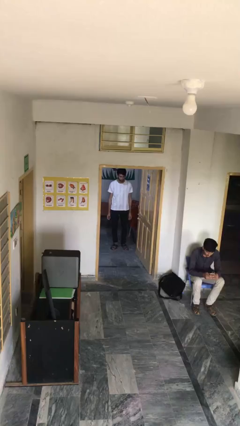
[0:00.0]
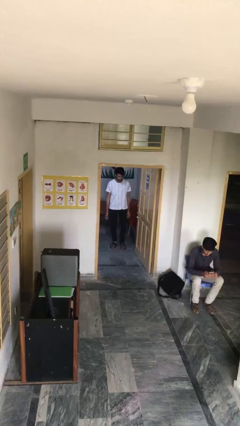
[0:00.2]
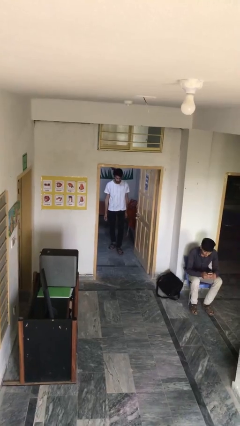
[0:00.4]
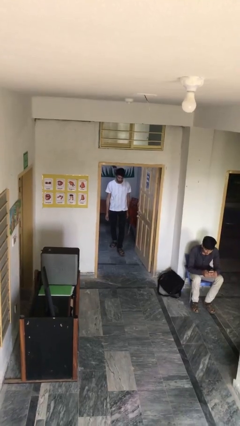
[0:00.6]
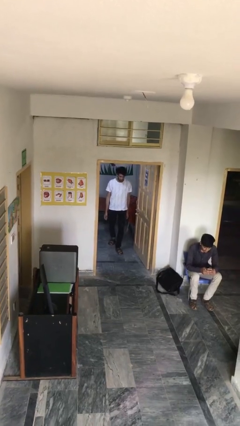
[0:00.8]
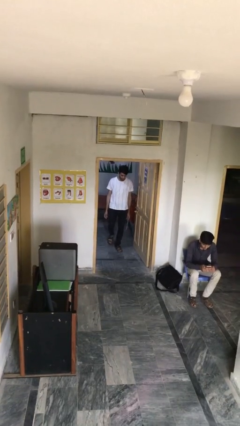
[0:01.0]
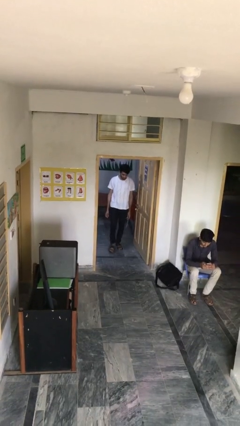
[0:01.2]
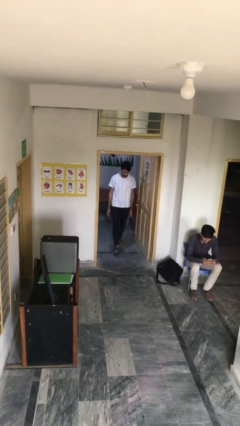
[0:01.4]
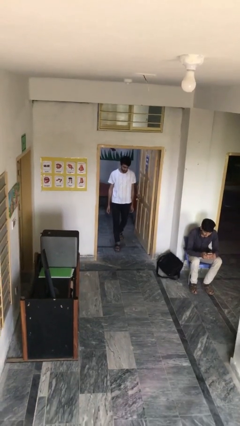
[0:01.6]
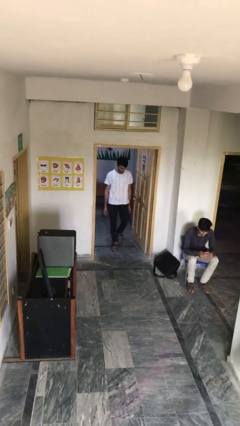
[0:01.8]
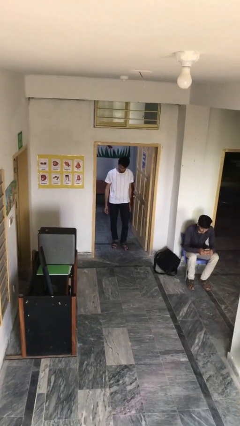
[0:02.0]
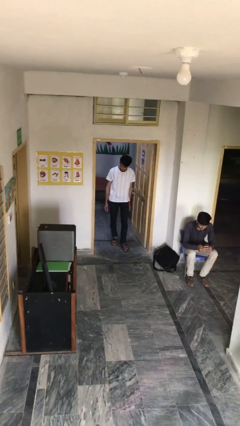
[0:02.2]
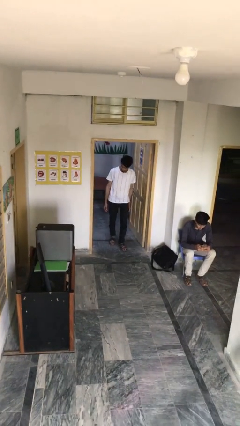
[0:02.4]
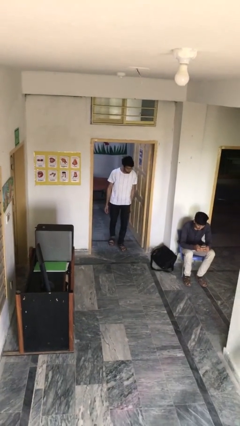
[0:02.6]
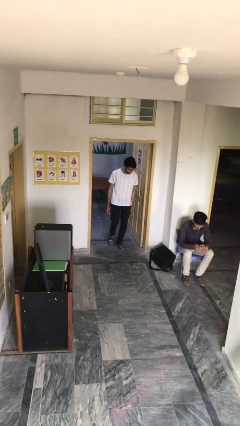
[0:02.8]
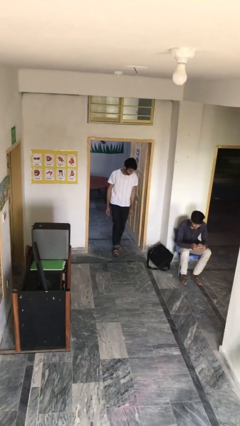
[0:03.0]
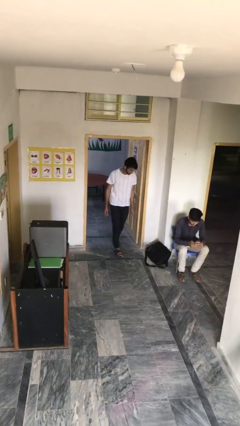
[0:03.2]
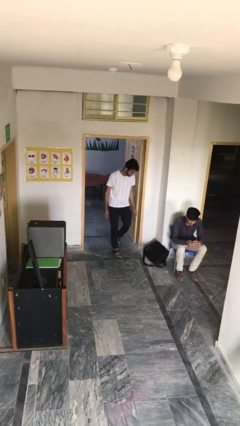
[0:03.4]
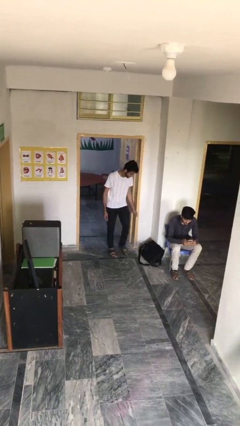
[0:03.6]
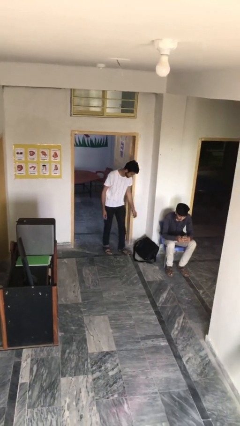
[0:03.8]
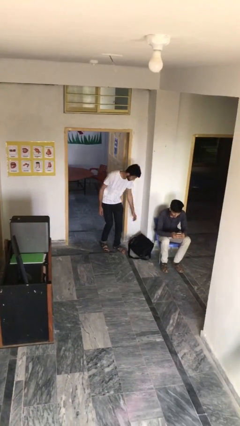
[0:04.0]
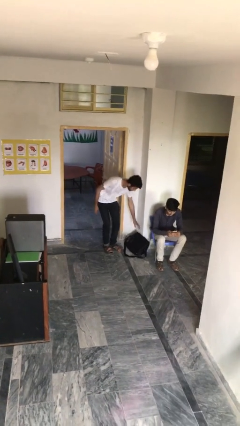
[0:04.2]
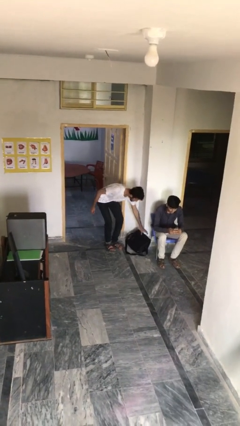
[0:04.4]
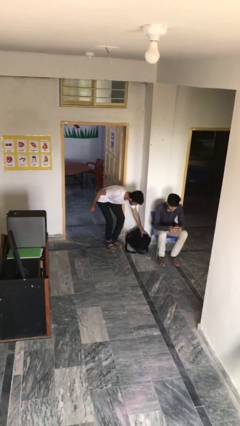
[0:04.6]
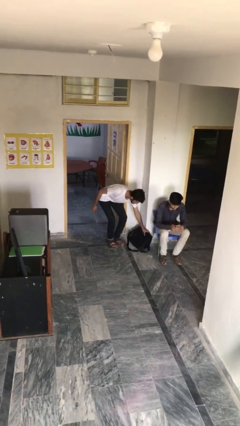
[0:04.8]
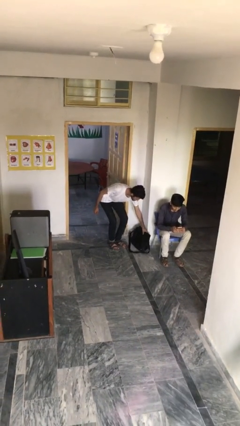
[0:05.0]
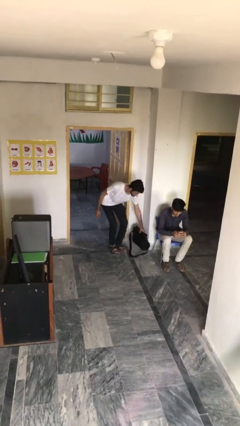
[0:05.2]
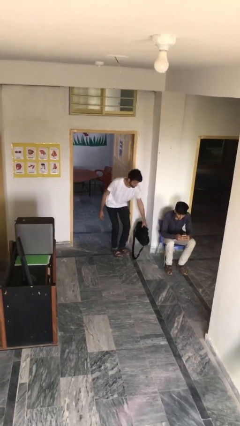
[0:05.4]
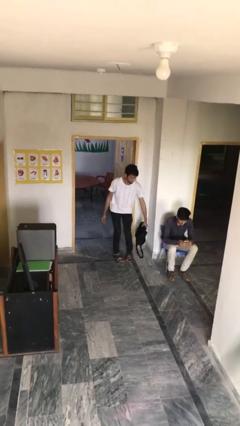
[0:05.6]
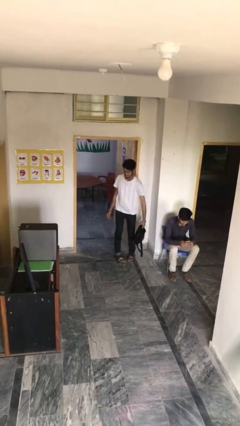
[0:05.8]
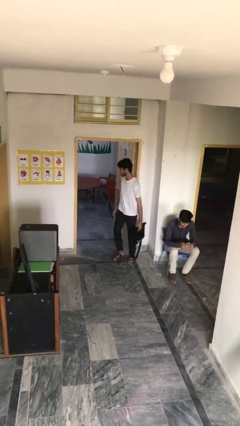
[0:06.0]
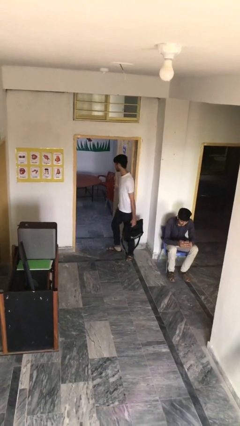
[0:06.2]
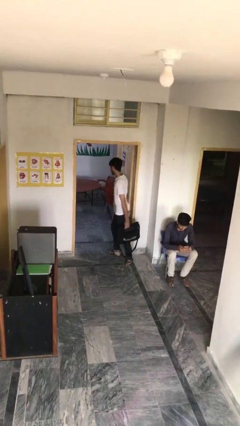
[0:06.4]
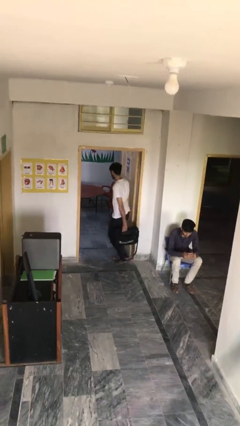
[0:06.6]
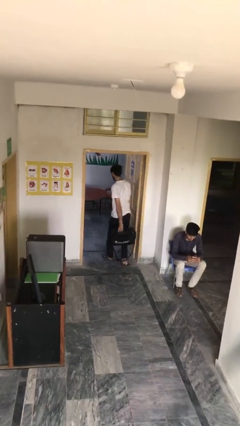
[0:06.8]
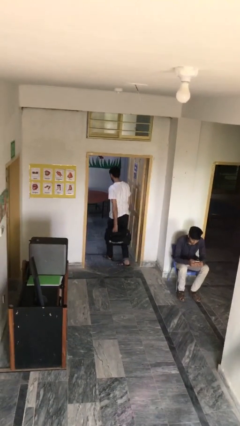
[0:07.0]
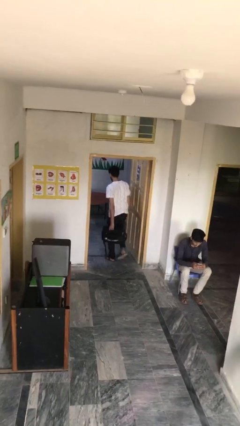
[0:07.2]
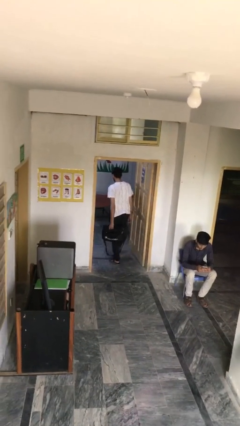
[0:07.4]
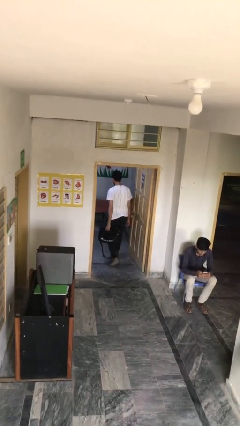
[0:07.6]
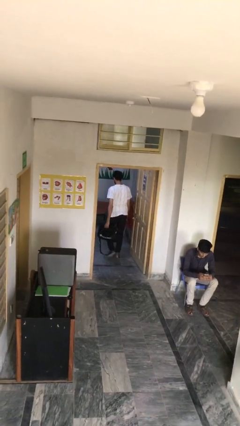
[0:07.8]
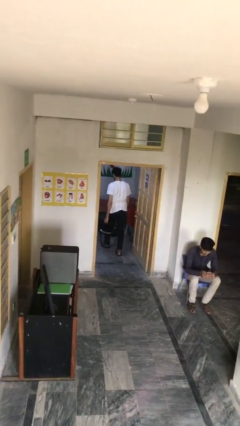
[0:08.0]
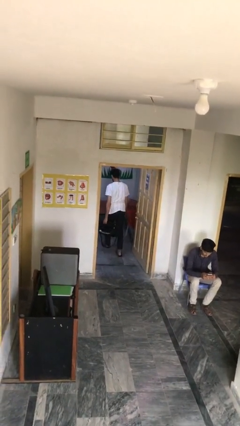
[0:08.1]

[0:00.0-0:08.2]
person steals object from person

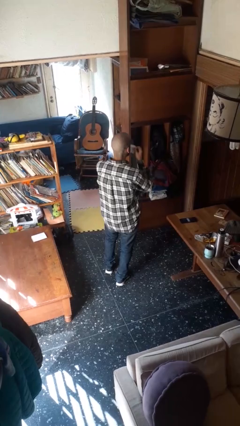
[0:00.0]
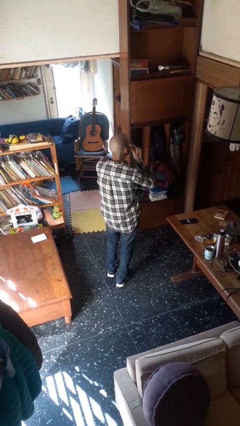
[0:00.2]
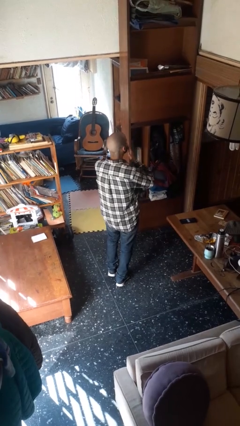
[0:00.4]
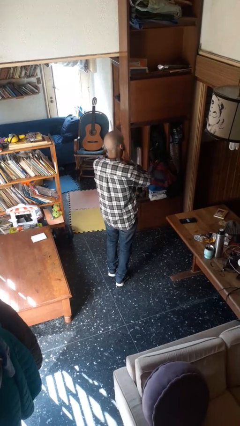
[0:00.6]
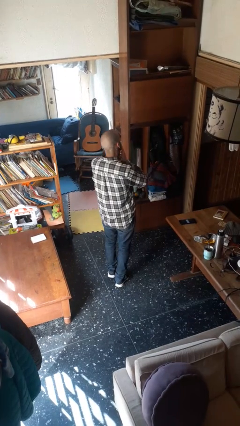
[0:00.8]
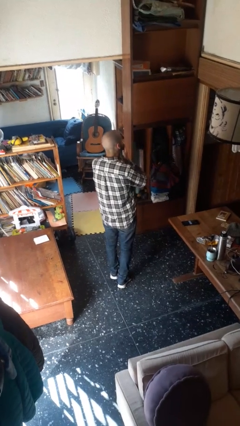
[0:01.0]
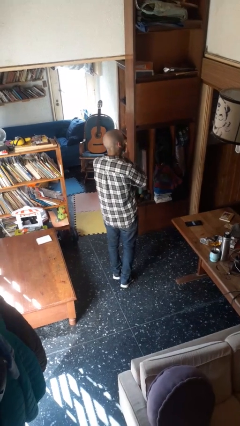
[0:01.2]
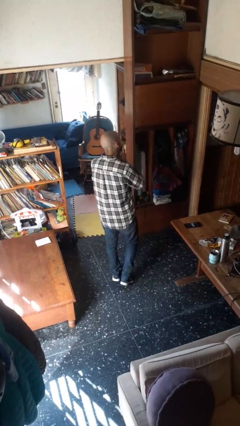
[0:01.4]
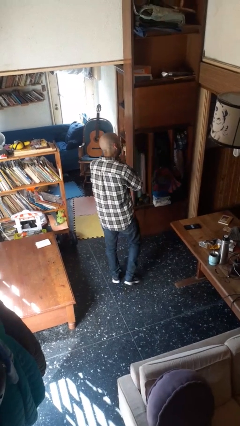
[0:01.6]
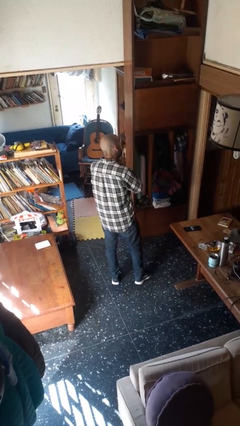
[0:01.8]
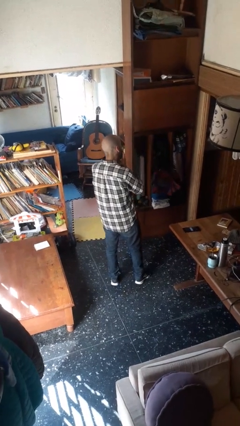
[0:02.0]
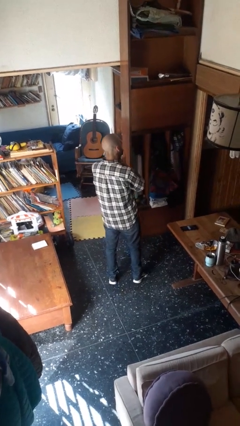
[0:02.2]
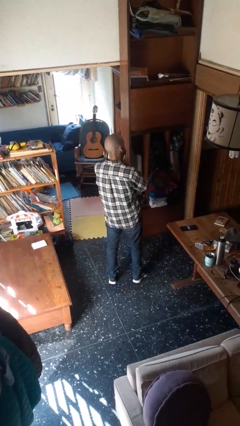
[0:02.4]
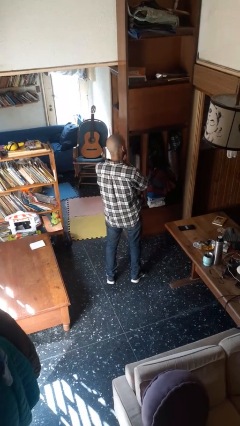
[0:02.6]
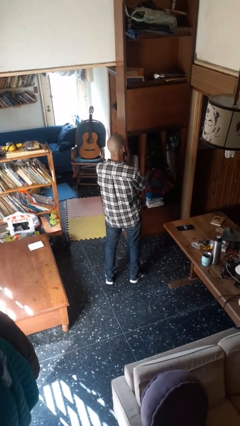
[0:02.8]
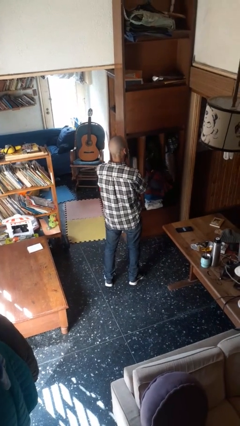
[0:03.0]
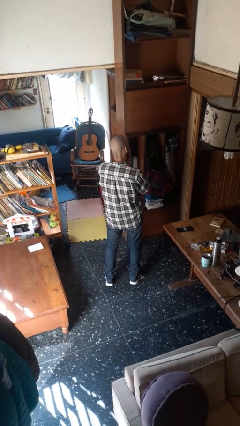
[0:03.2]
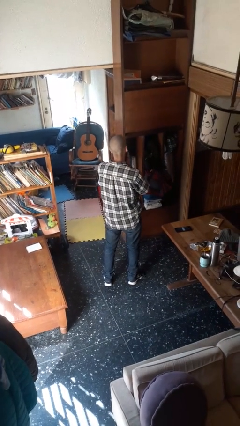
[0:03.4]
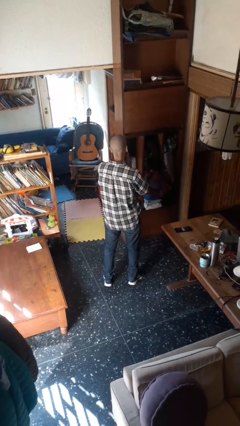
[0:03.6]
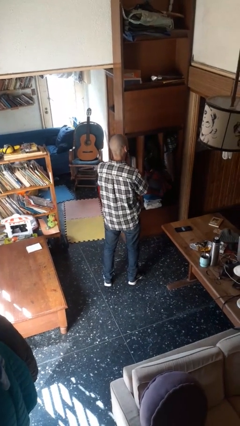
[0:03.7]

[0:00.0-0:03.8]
person wipes mouth with napkin

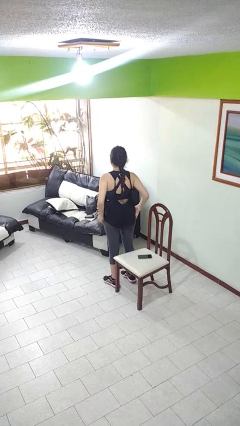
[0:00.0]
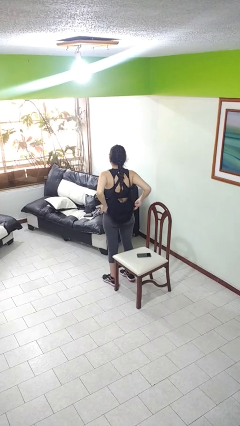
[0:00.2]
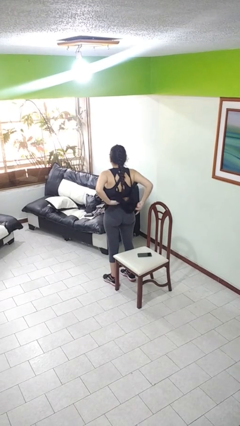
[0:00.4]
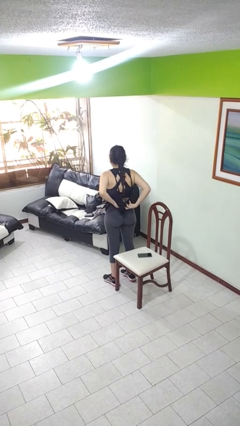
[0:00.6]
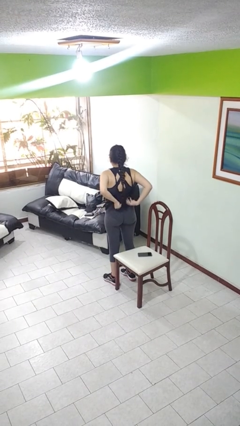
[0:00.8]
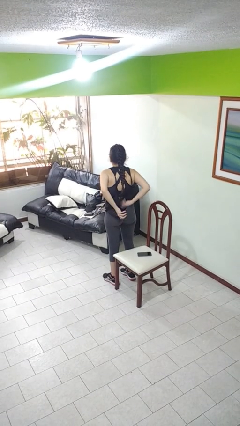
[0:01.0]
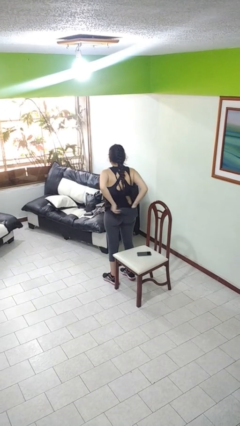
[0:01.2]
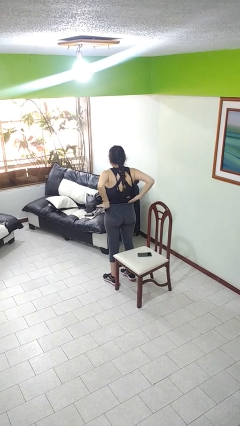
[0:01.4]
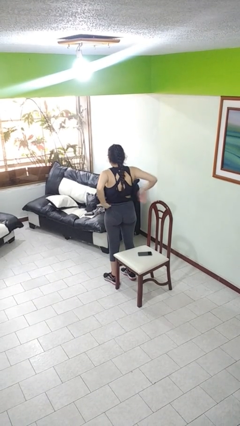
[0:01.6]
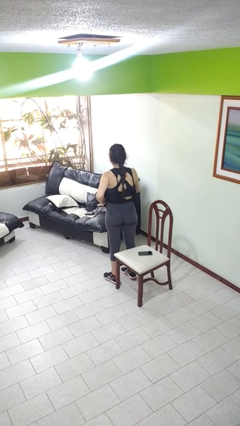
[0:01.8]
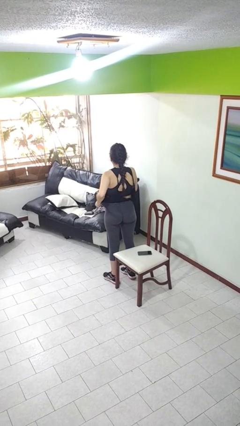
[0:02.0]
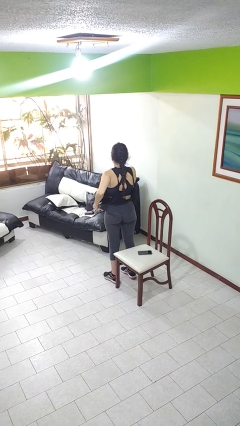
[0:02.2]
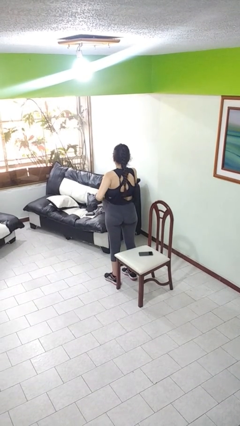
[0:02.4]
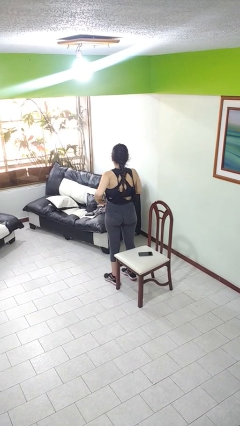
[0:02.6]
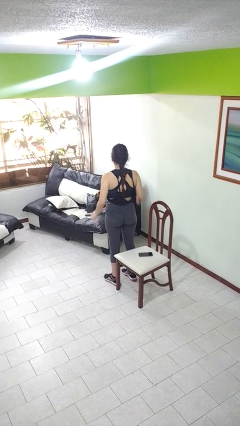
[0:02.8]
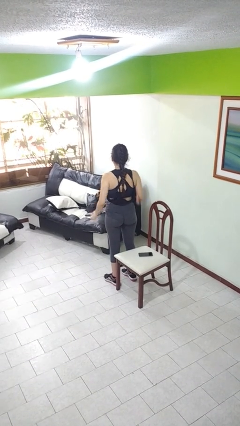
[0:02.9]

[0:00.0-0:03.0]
person tucks in shirt

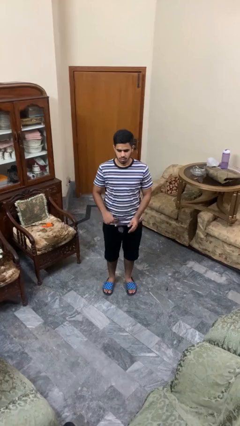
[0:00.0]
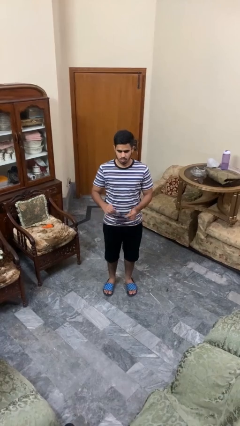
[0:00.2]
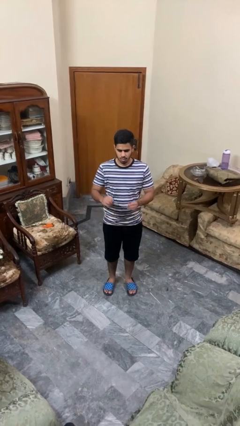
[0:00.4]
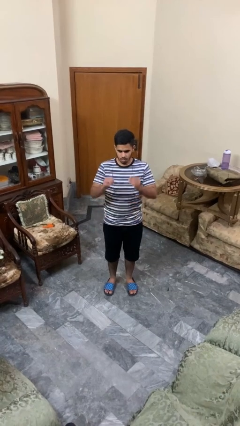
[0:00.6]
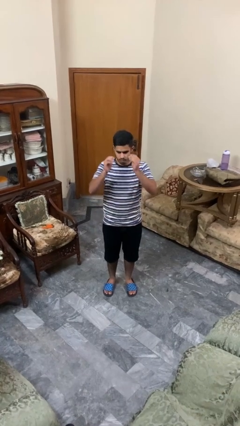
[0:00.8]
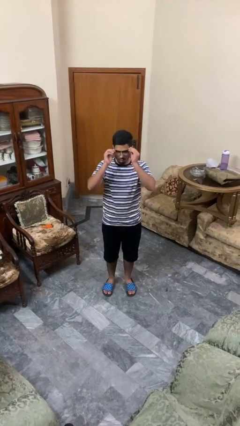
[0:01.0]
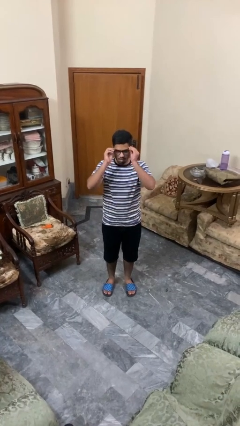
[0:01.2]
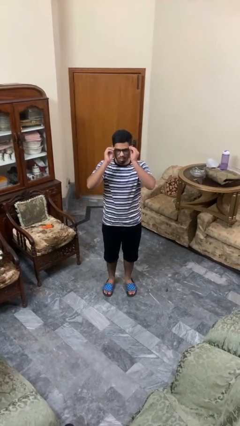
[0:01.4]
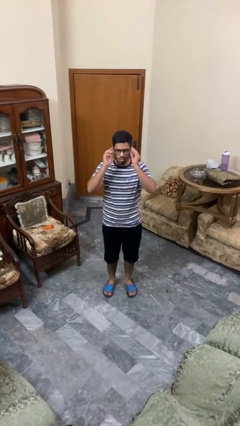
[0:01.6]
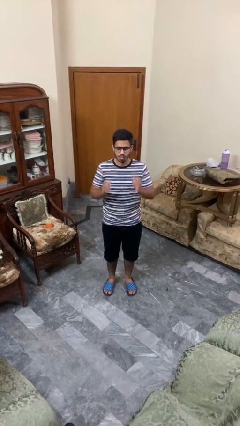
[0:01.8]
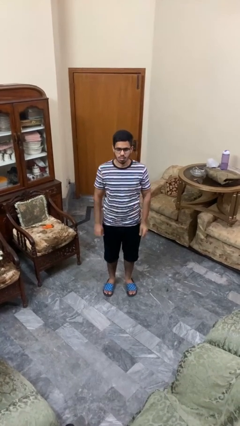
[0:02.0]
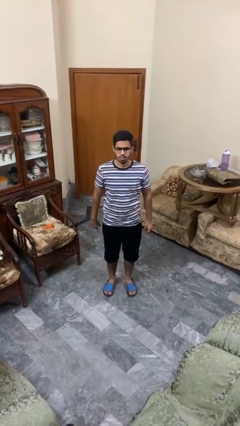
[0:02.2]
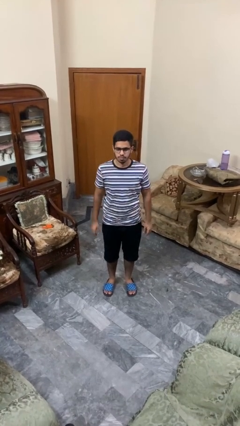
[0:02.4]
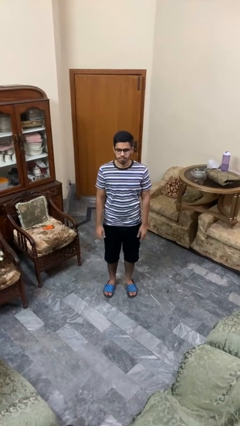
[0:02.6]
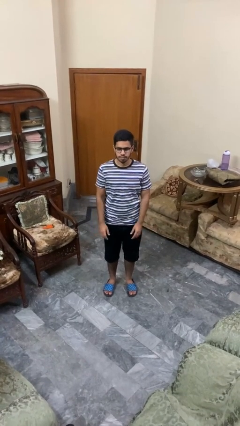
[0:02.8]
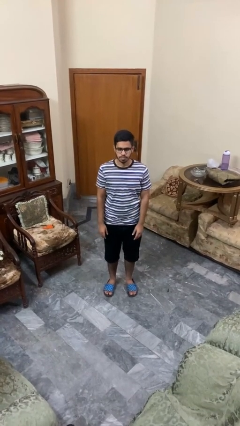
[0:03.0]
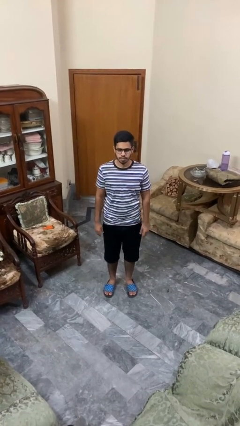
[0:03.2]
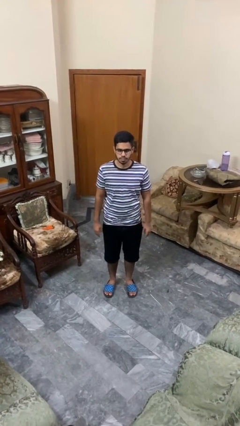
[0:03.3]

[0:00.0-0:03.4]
person puts on glasses
